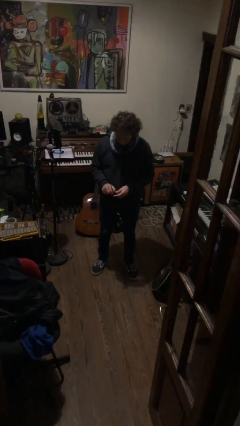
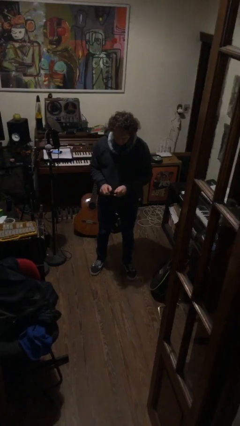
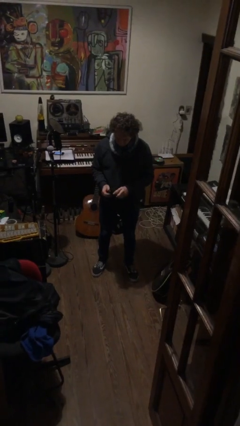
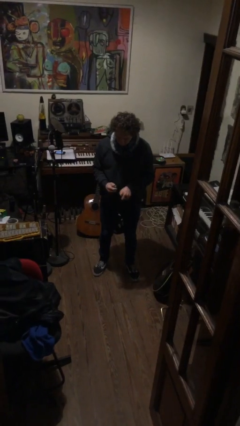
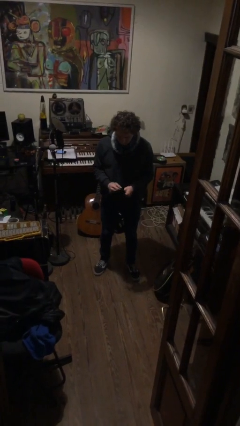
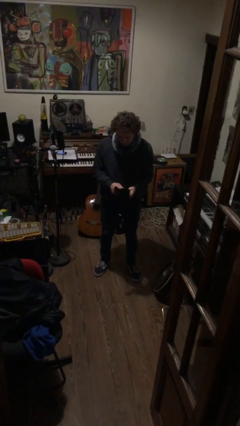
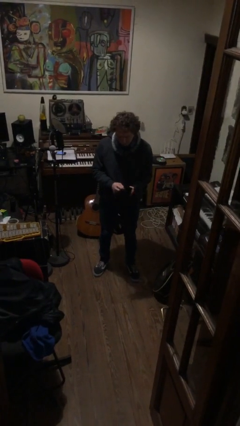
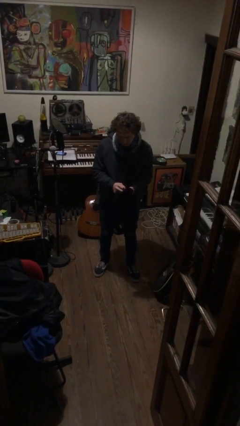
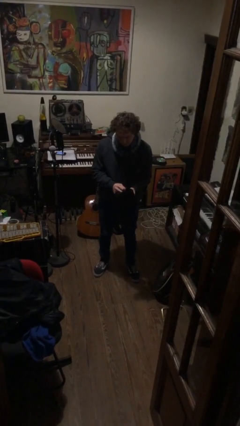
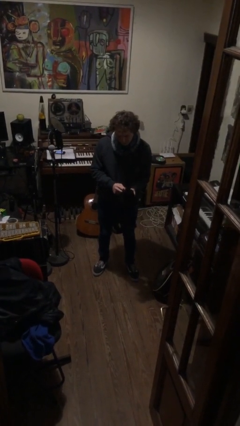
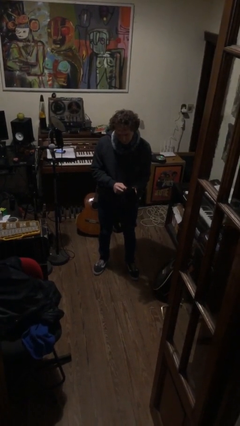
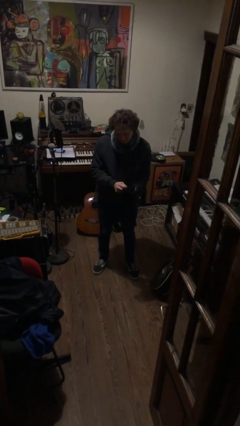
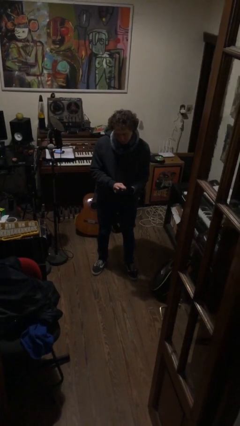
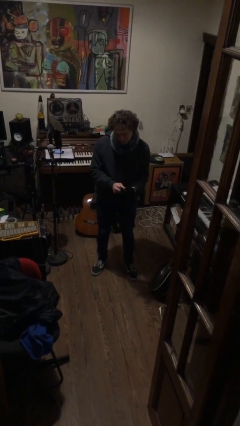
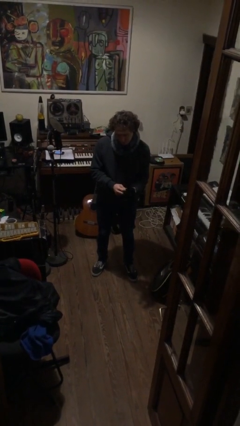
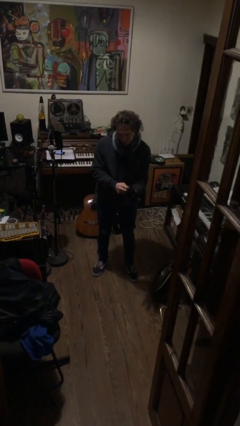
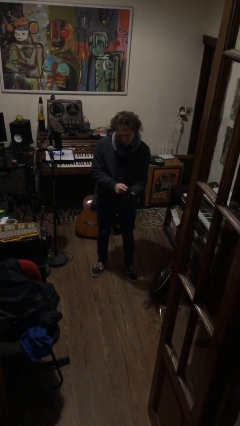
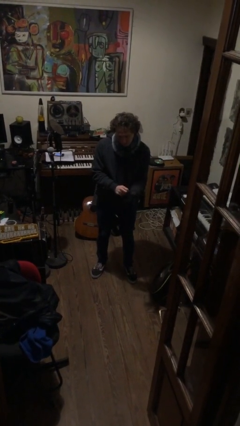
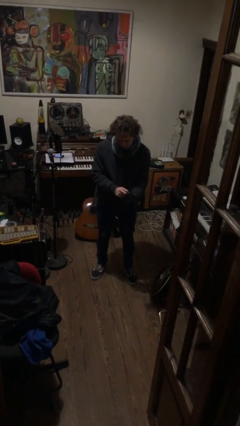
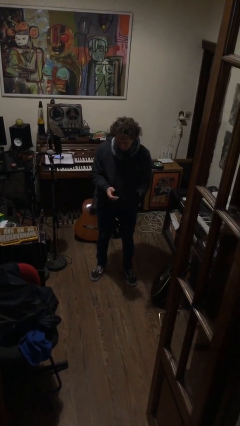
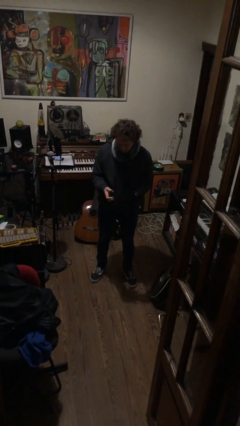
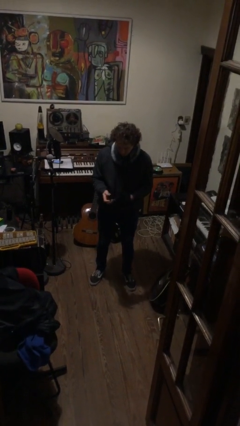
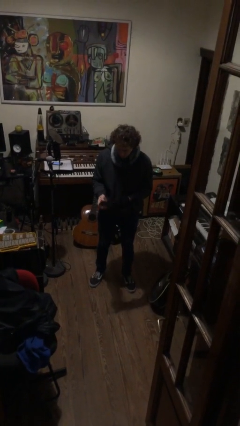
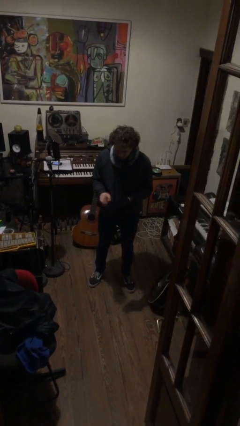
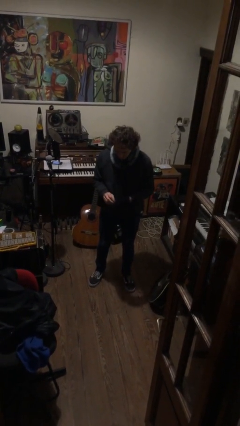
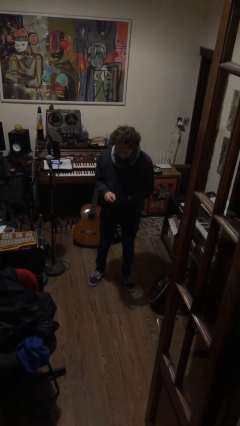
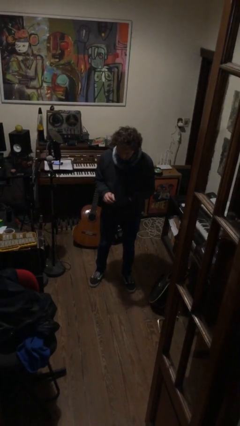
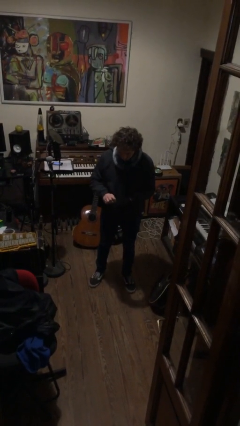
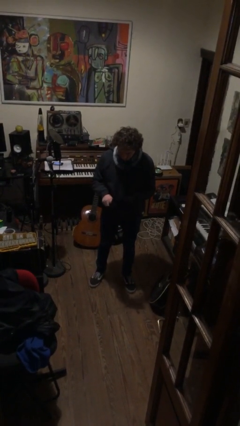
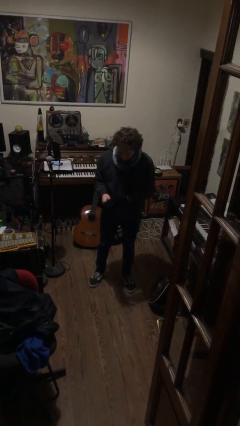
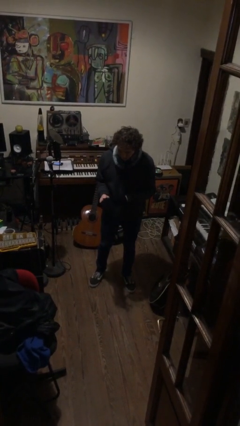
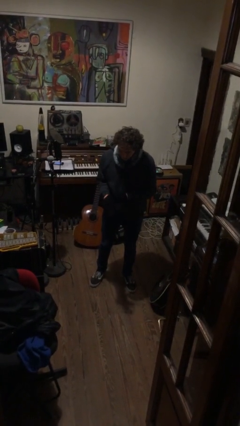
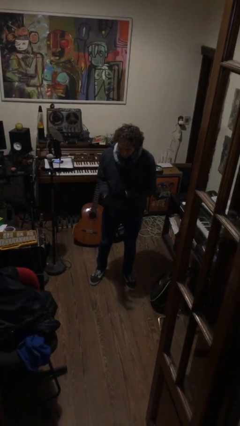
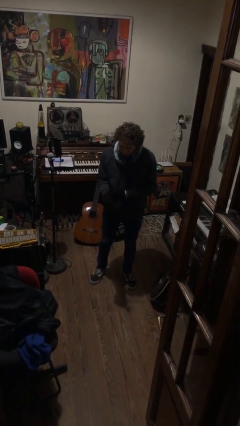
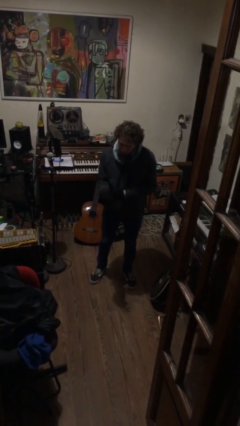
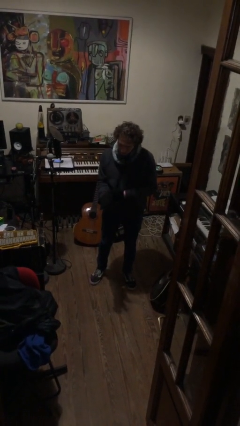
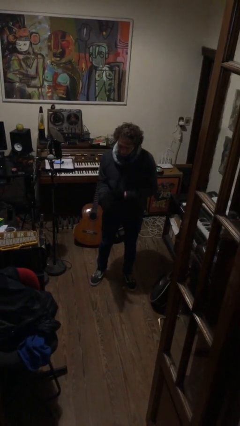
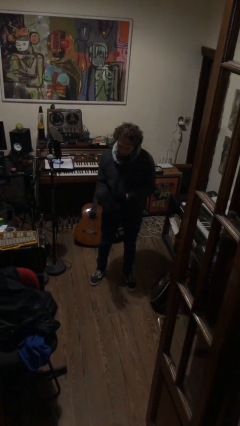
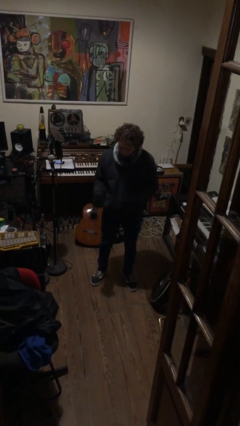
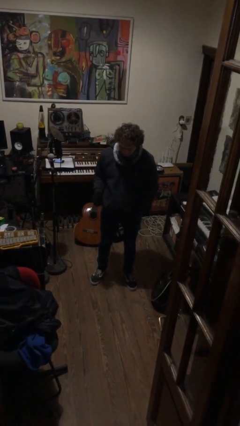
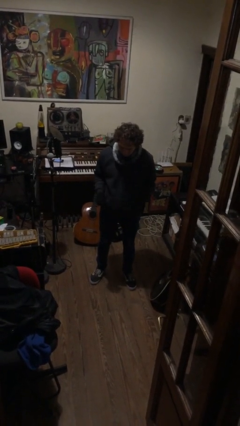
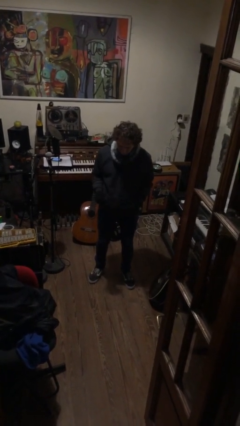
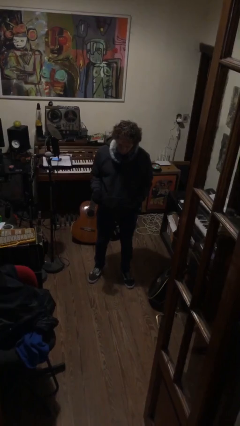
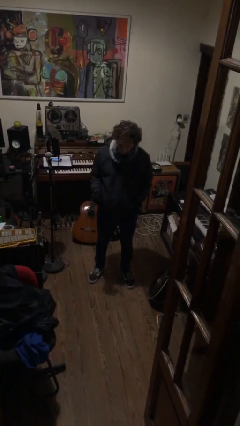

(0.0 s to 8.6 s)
person puts on gloves

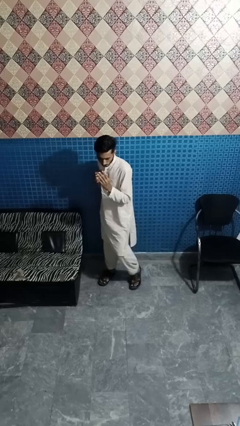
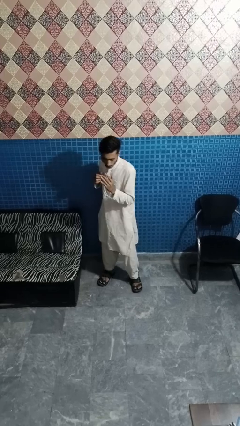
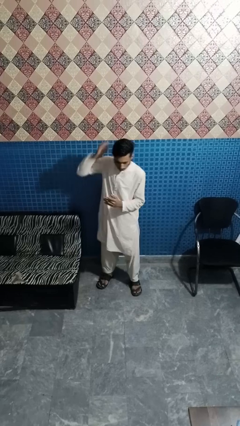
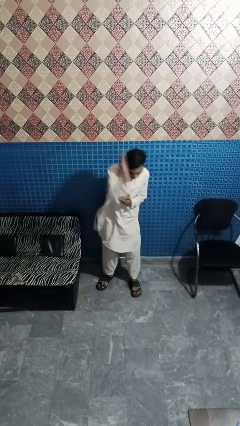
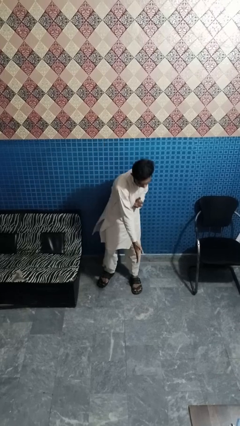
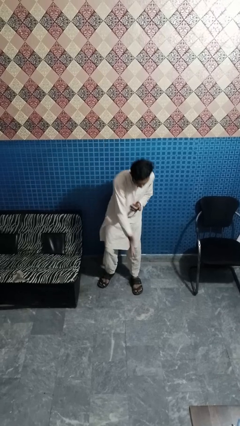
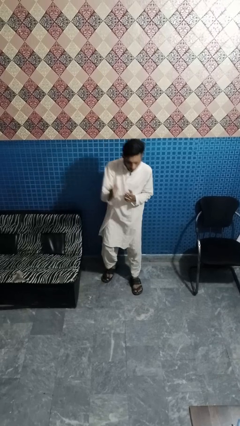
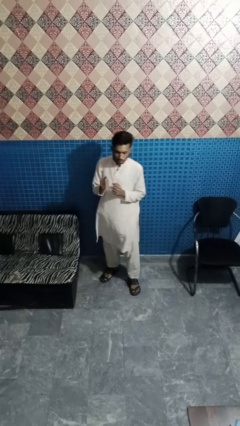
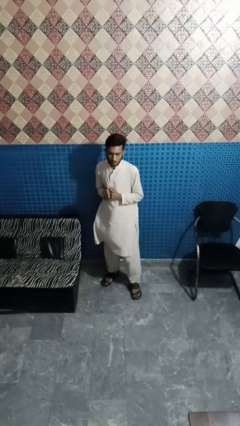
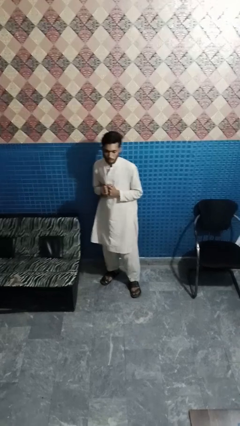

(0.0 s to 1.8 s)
person karate chop

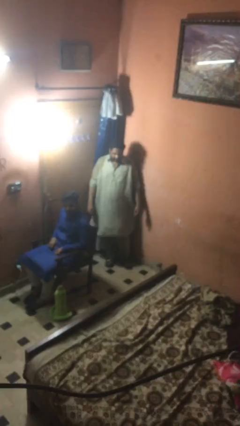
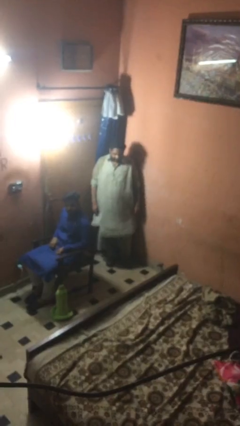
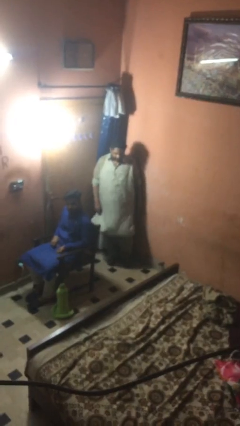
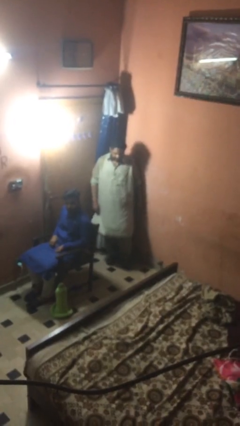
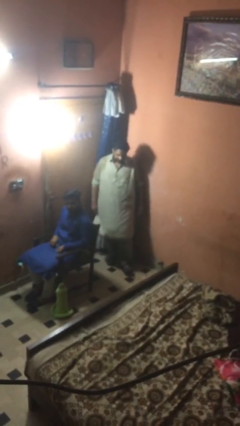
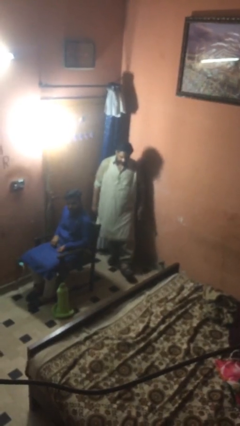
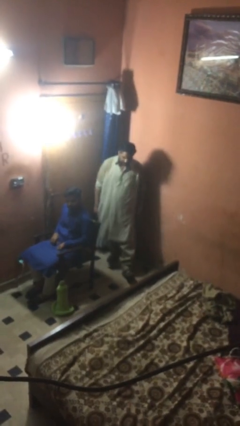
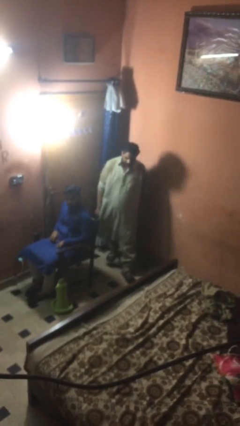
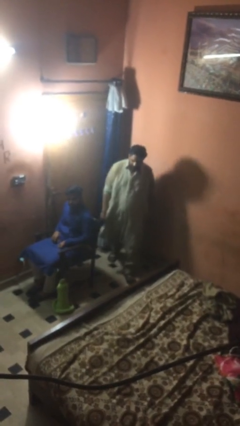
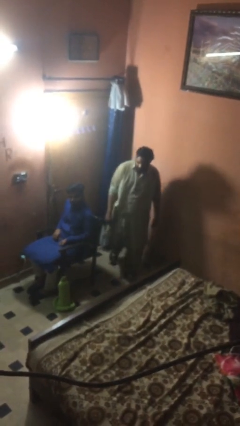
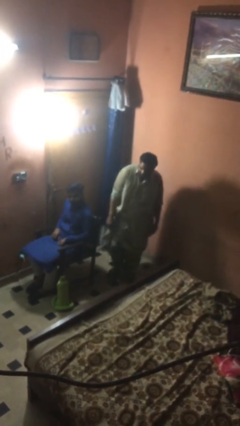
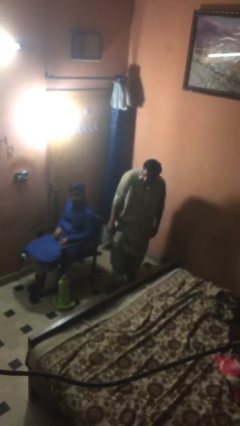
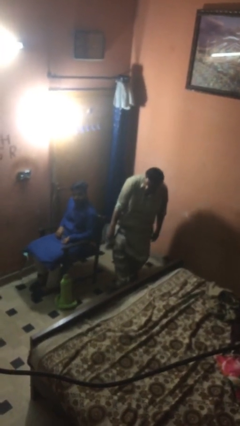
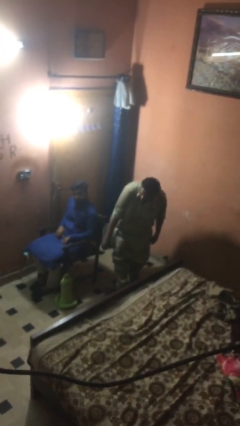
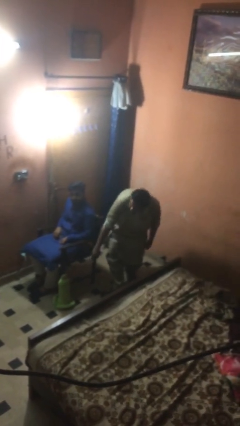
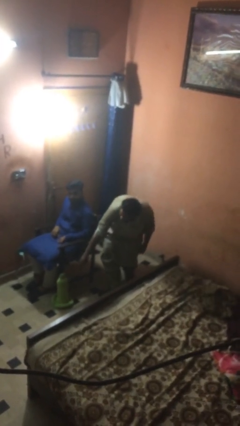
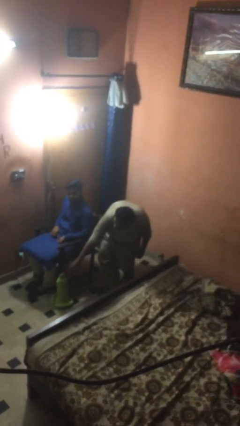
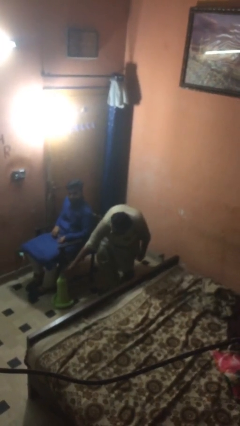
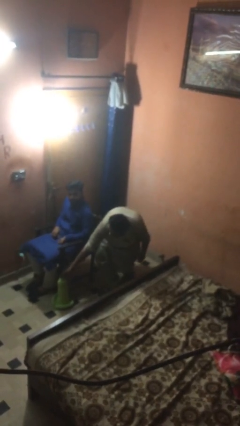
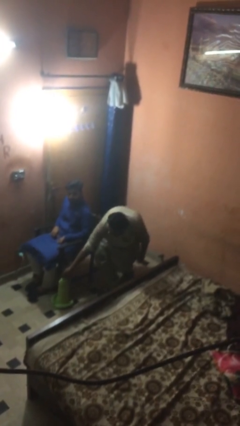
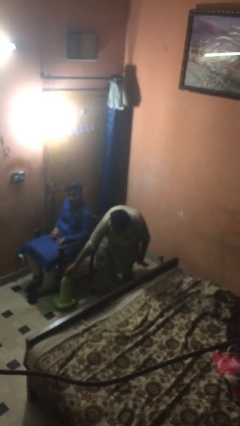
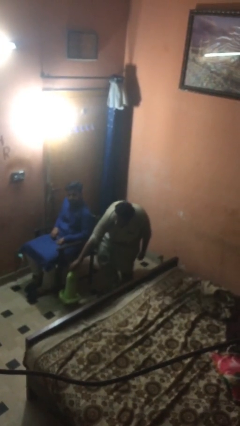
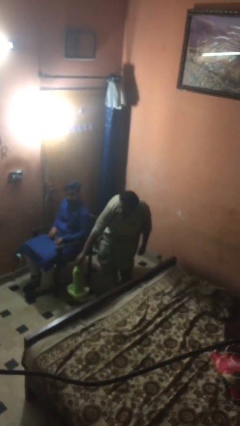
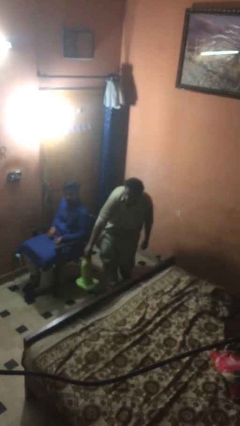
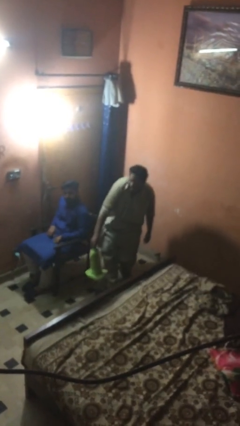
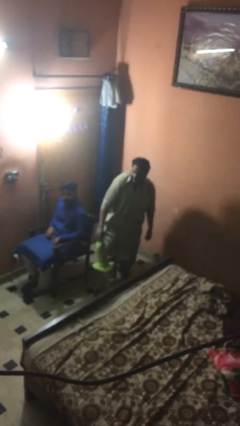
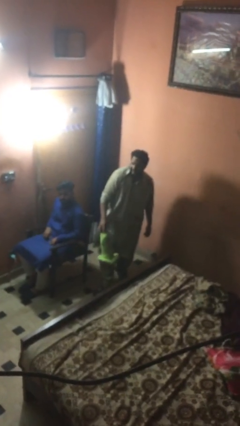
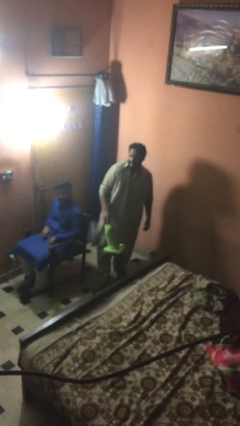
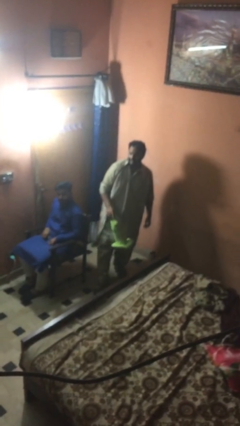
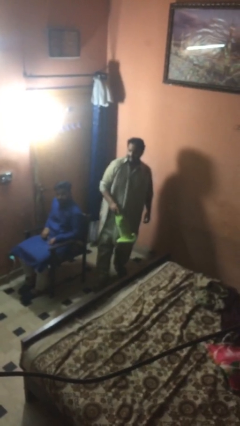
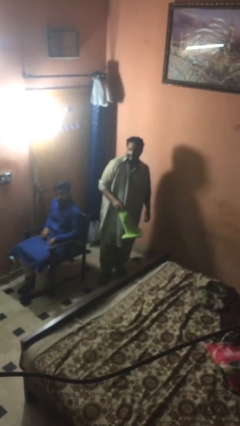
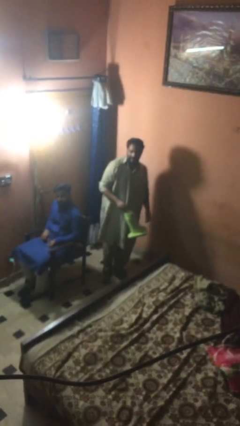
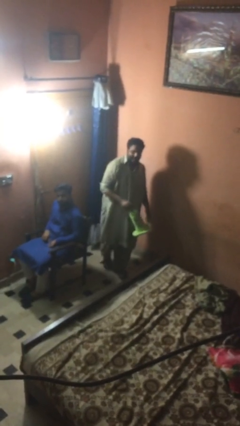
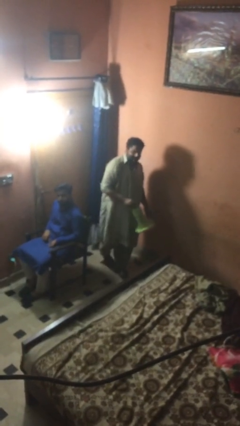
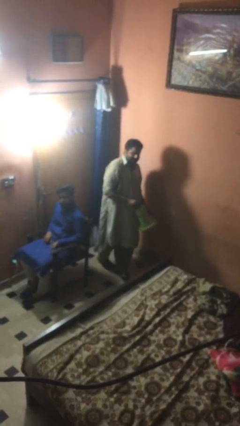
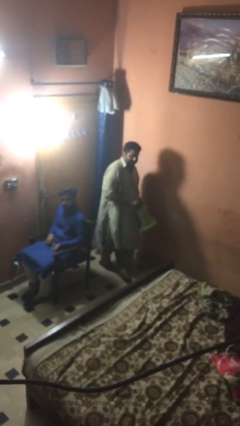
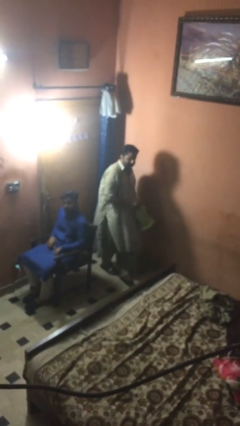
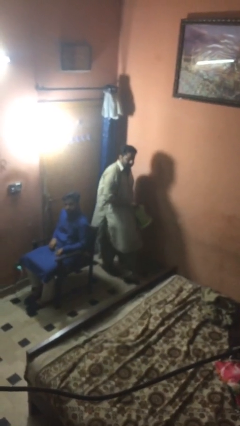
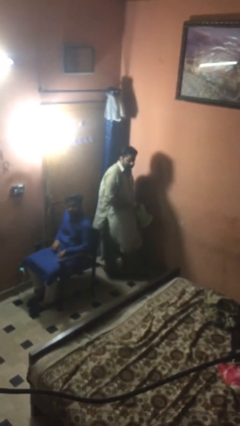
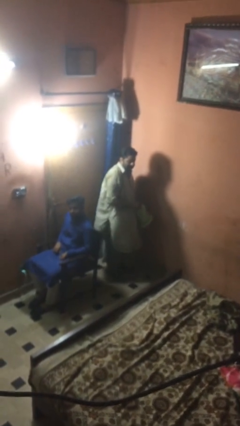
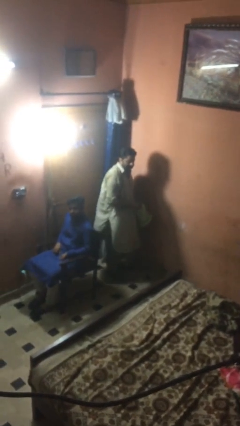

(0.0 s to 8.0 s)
person steals object from person
